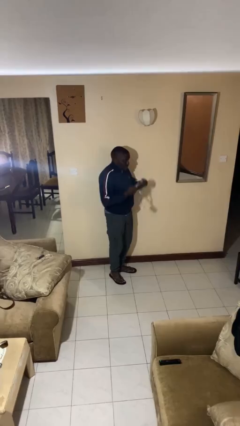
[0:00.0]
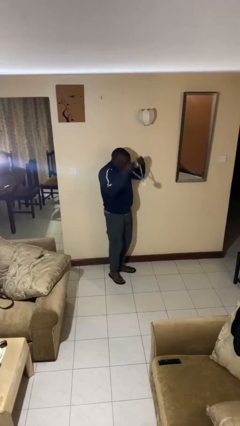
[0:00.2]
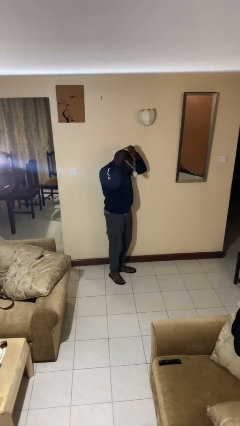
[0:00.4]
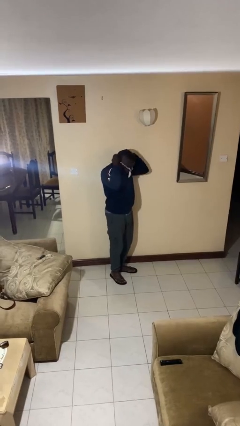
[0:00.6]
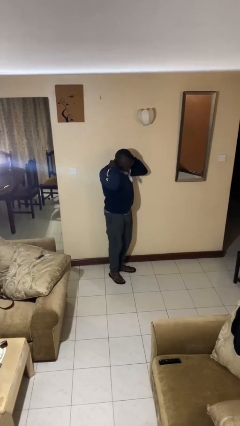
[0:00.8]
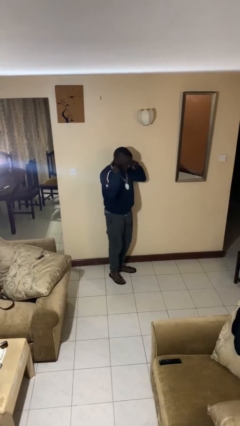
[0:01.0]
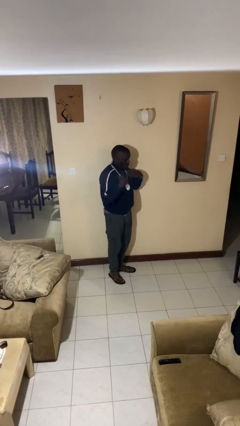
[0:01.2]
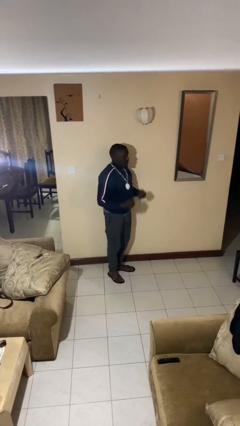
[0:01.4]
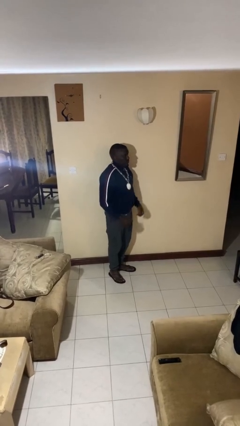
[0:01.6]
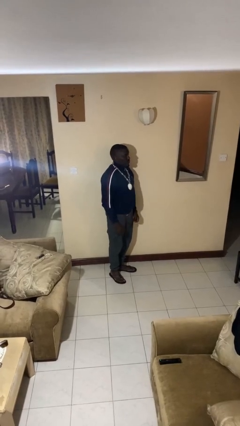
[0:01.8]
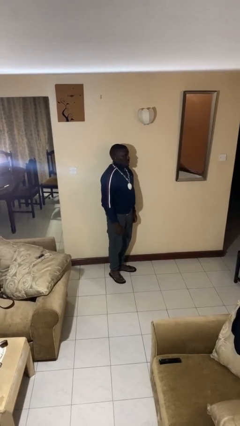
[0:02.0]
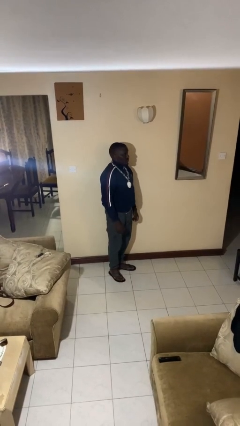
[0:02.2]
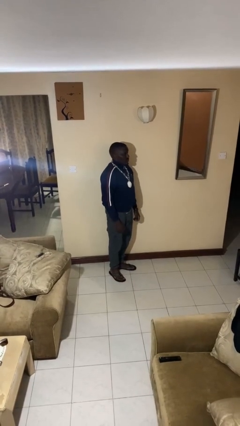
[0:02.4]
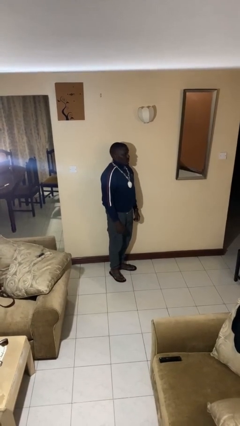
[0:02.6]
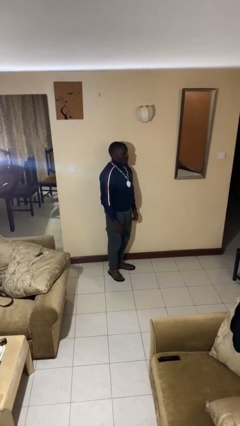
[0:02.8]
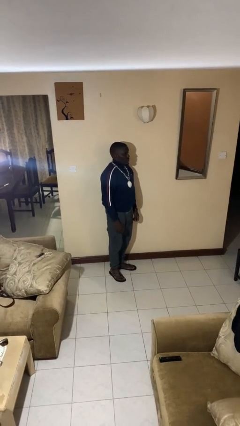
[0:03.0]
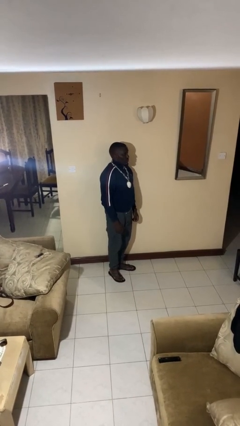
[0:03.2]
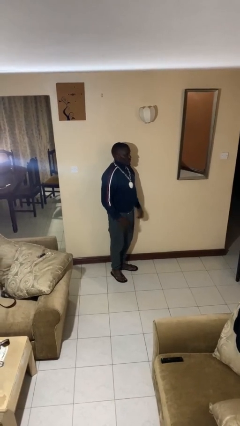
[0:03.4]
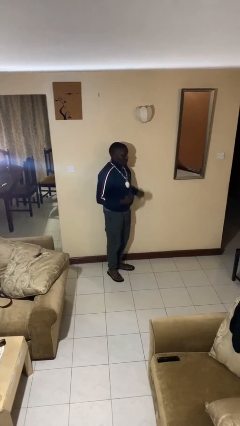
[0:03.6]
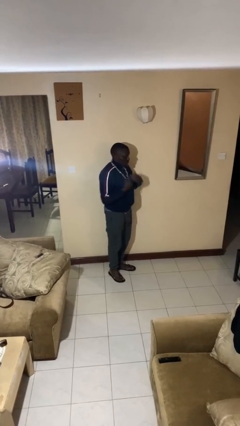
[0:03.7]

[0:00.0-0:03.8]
person puts on necklace

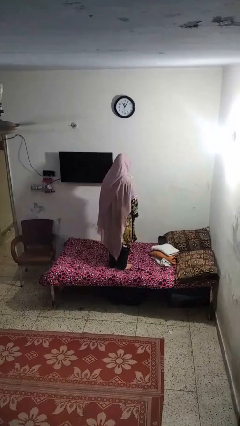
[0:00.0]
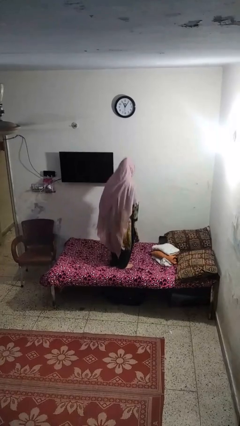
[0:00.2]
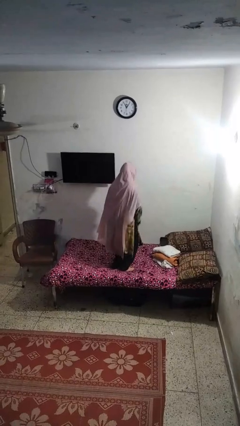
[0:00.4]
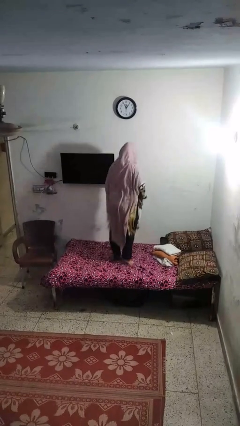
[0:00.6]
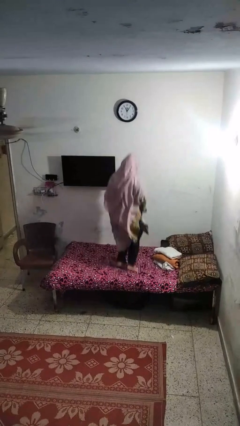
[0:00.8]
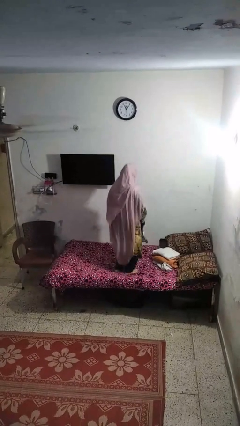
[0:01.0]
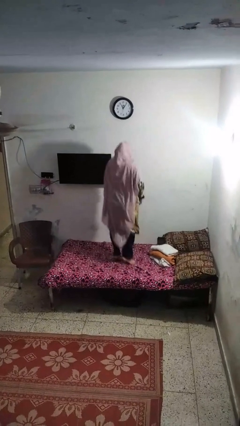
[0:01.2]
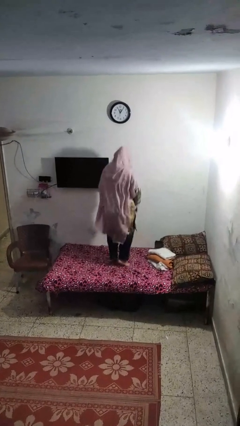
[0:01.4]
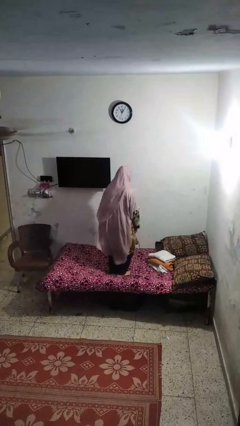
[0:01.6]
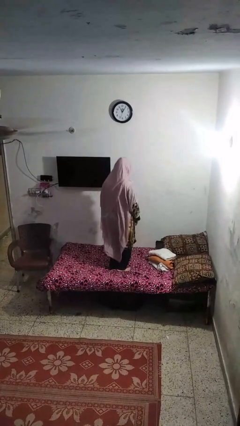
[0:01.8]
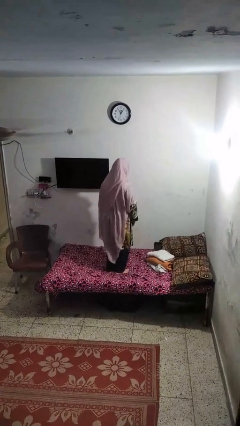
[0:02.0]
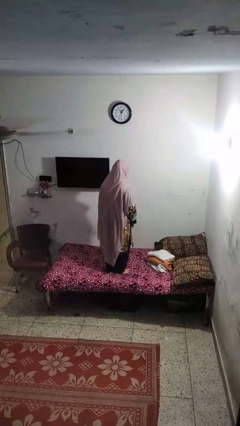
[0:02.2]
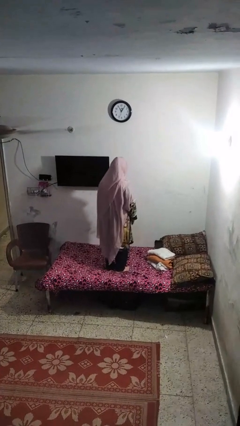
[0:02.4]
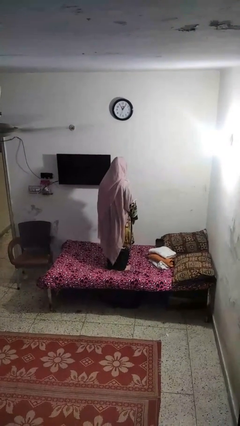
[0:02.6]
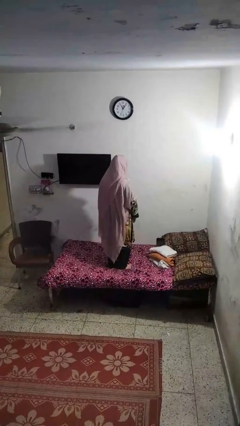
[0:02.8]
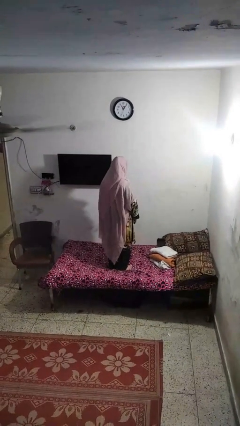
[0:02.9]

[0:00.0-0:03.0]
person jumps on bed

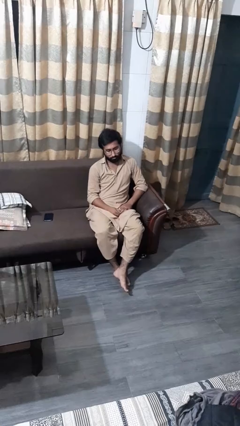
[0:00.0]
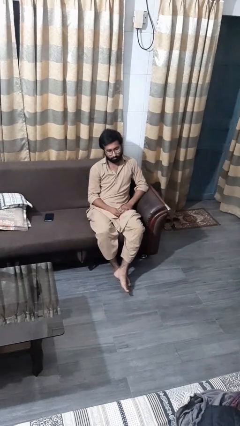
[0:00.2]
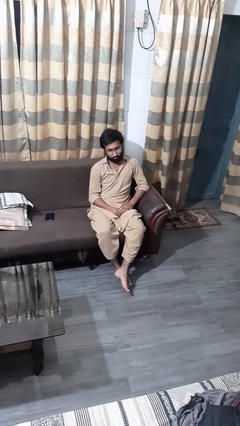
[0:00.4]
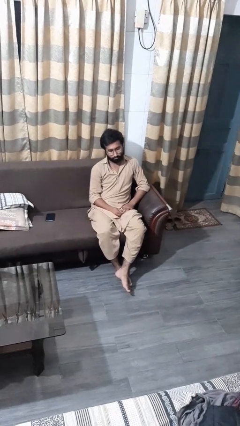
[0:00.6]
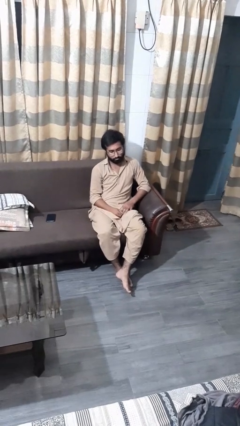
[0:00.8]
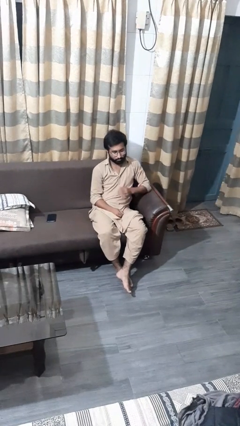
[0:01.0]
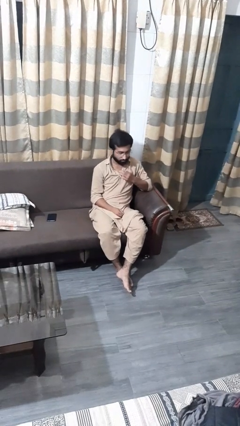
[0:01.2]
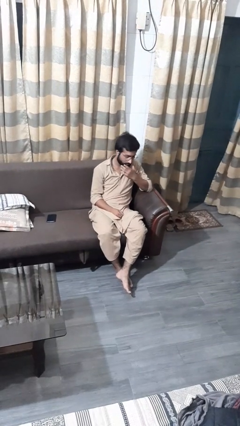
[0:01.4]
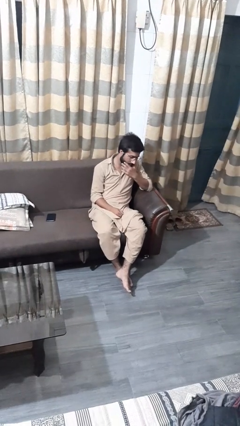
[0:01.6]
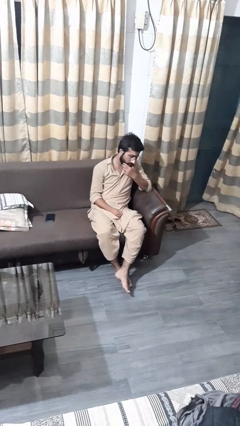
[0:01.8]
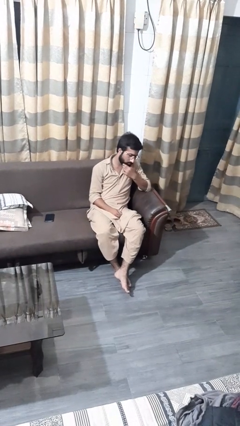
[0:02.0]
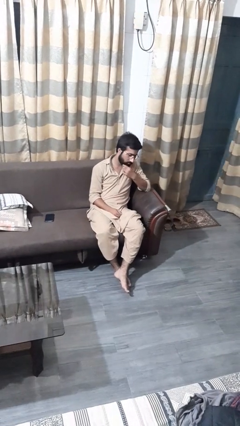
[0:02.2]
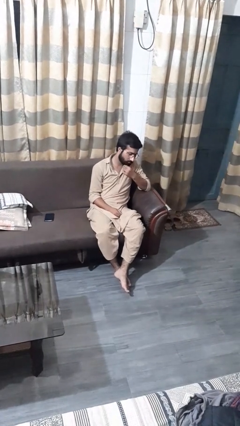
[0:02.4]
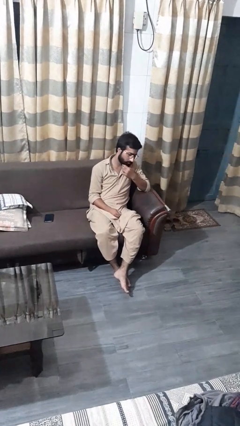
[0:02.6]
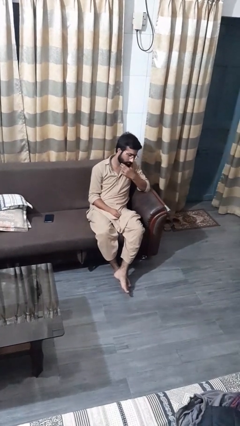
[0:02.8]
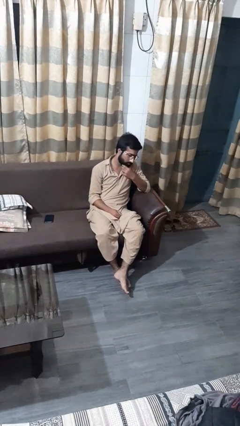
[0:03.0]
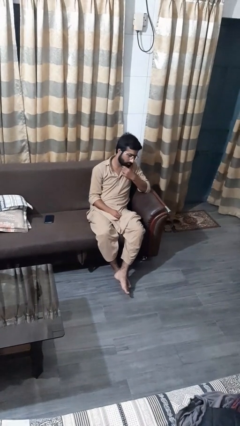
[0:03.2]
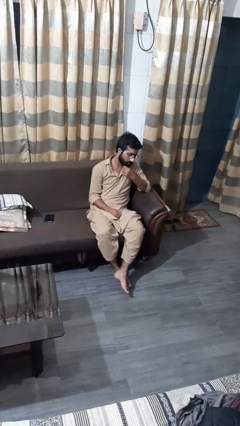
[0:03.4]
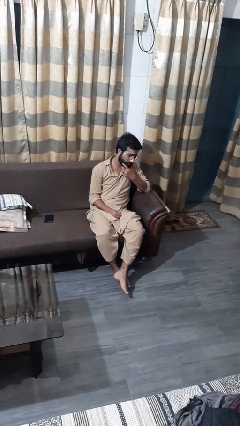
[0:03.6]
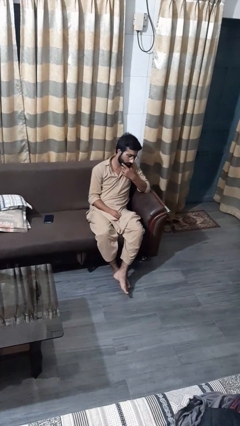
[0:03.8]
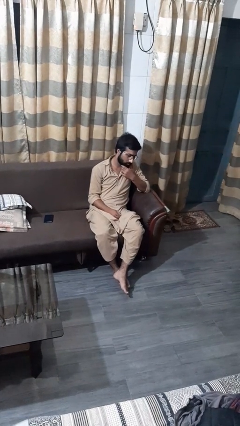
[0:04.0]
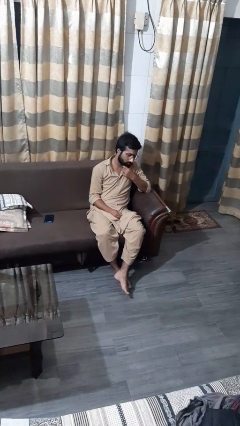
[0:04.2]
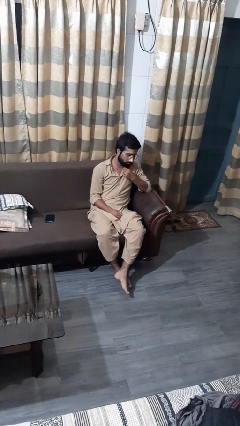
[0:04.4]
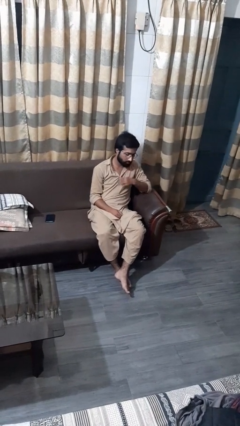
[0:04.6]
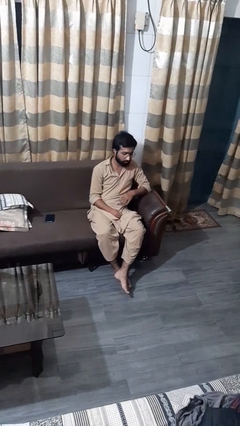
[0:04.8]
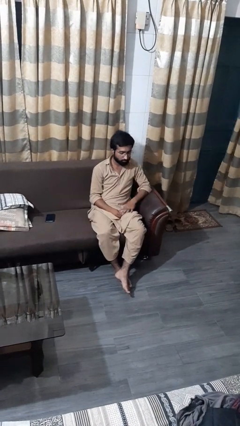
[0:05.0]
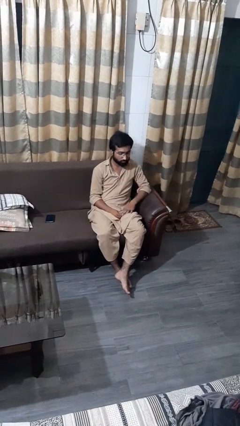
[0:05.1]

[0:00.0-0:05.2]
person strokes chin

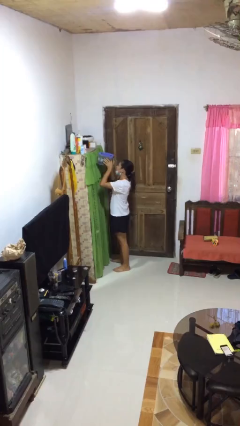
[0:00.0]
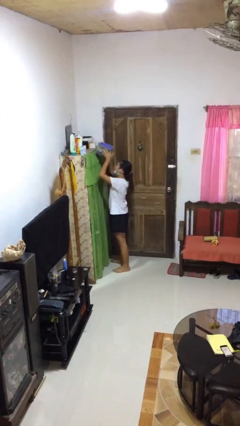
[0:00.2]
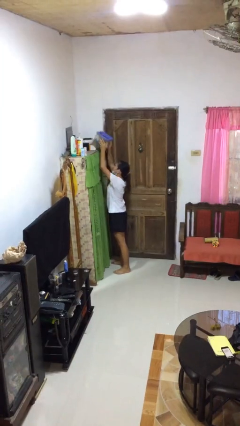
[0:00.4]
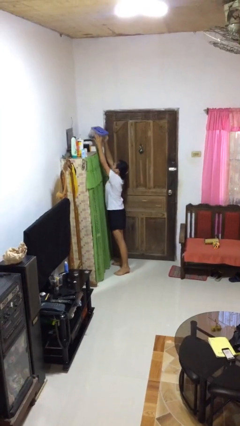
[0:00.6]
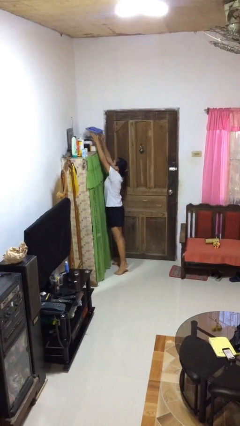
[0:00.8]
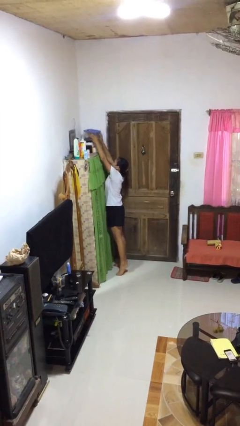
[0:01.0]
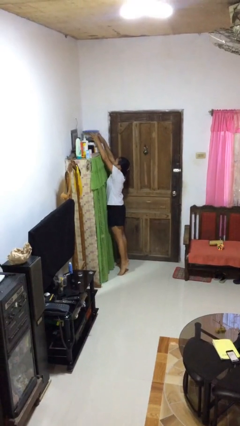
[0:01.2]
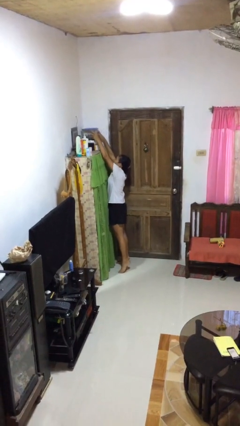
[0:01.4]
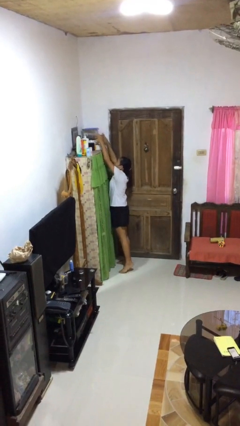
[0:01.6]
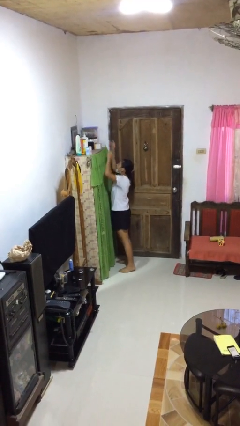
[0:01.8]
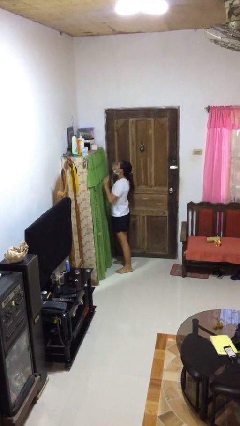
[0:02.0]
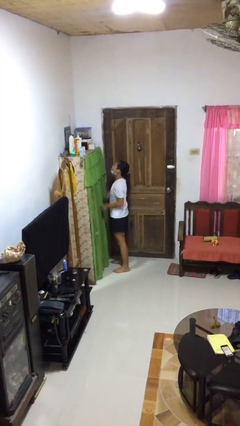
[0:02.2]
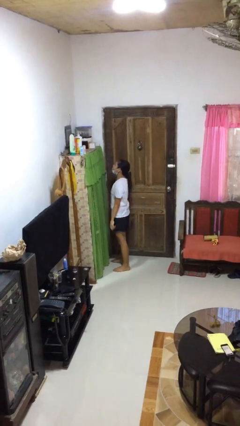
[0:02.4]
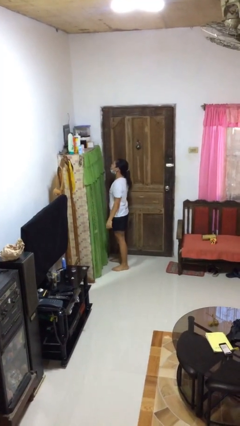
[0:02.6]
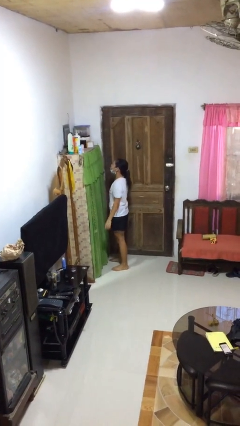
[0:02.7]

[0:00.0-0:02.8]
person puts down object on shelf

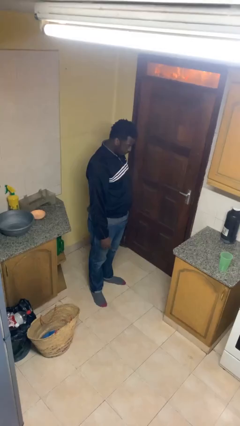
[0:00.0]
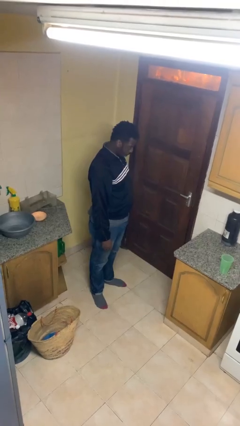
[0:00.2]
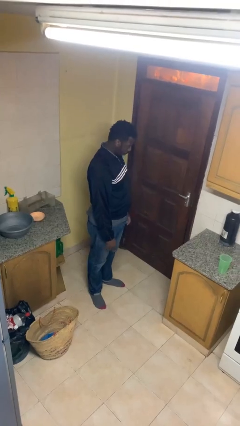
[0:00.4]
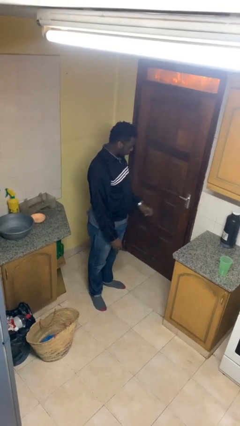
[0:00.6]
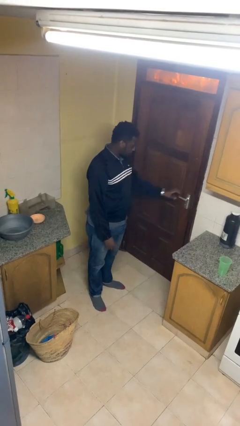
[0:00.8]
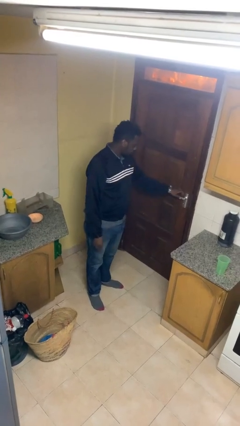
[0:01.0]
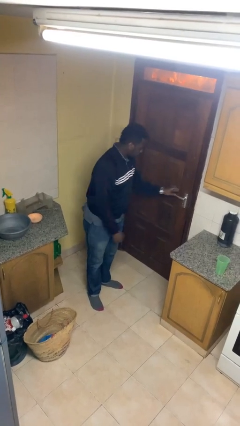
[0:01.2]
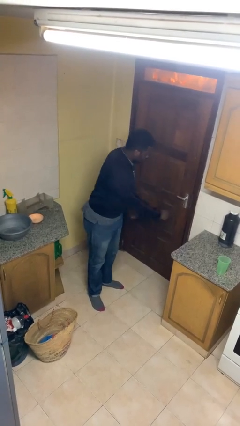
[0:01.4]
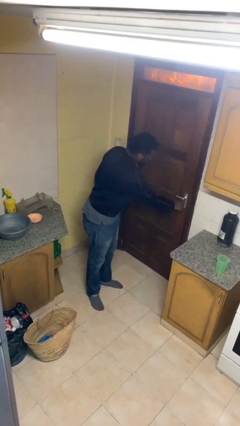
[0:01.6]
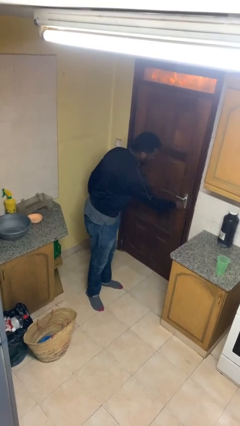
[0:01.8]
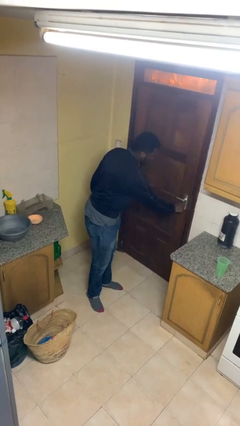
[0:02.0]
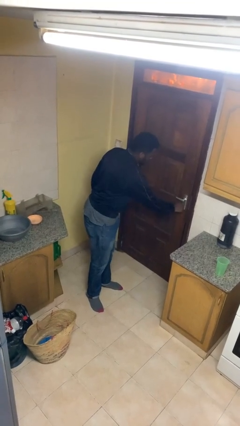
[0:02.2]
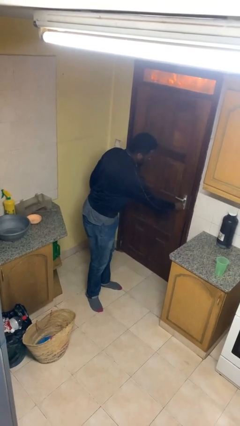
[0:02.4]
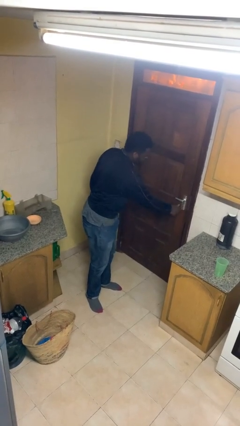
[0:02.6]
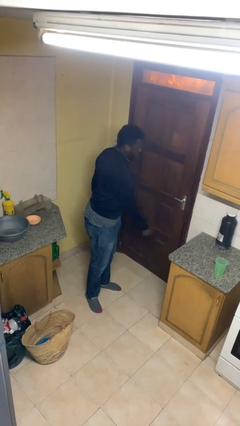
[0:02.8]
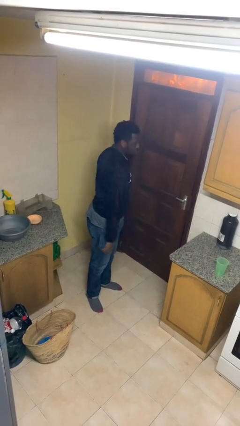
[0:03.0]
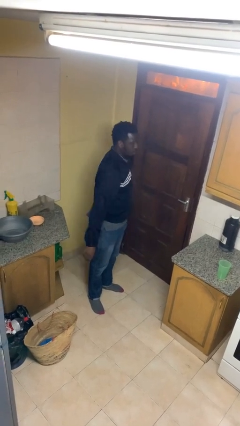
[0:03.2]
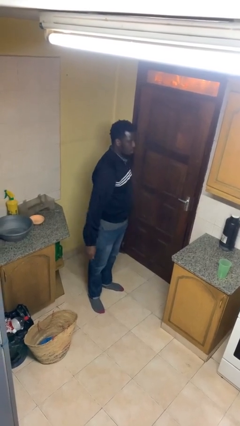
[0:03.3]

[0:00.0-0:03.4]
person unlocks door with keys
